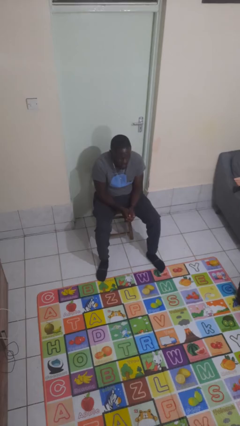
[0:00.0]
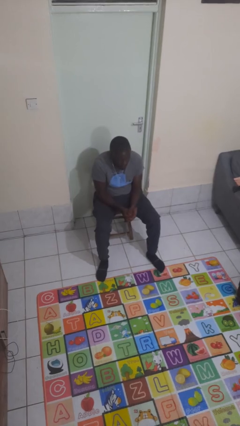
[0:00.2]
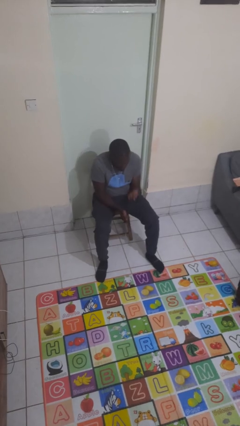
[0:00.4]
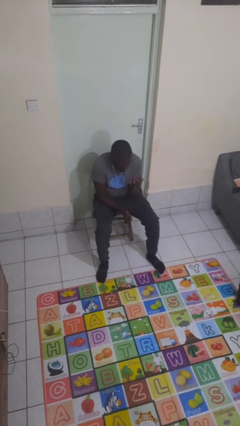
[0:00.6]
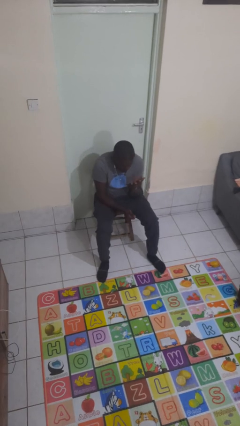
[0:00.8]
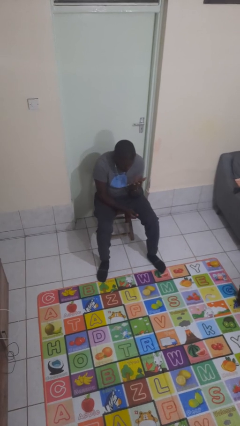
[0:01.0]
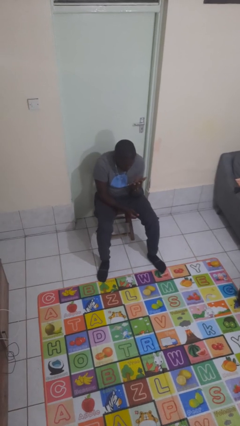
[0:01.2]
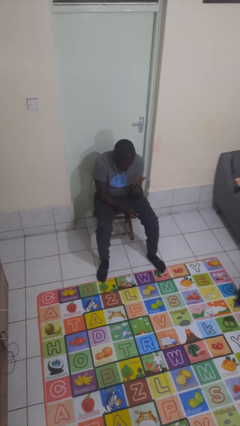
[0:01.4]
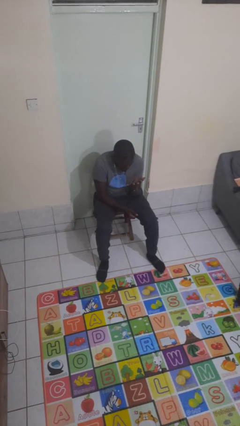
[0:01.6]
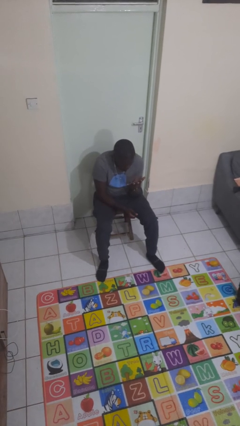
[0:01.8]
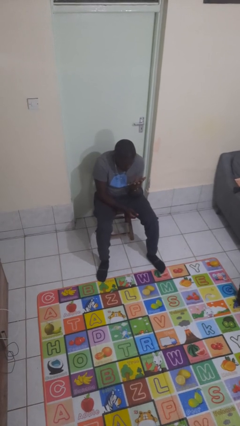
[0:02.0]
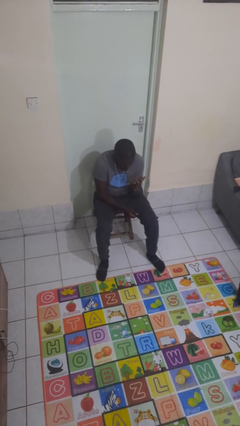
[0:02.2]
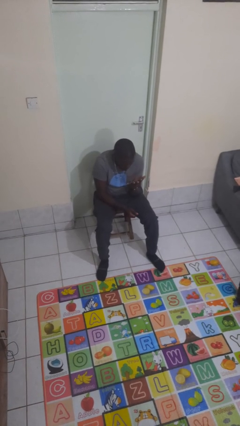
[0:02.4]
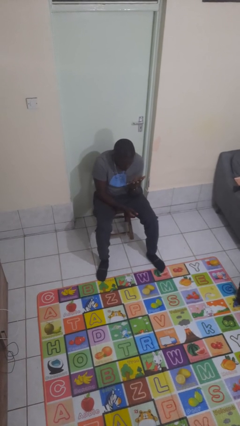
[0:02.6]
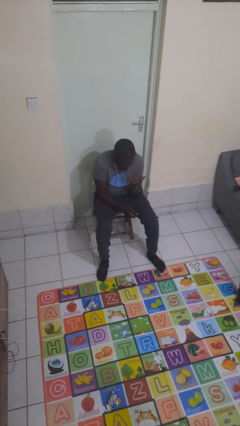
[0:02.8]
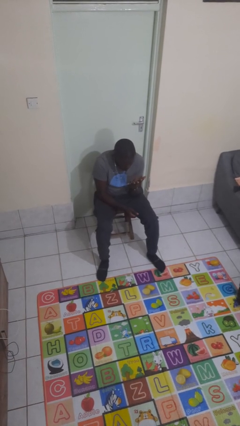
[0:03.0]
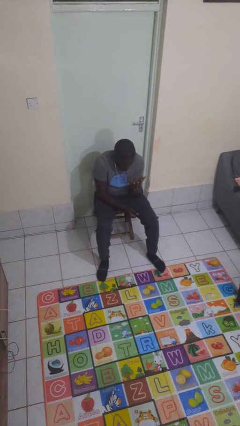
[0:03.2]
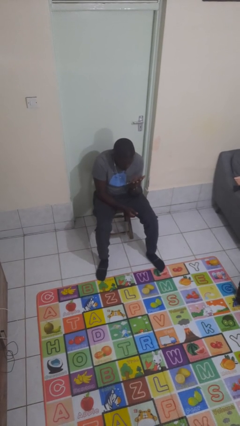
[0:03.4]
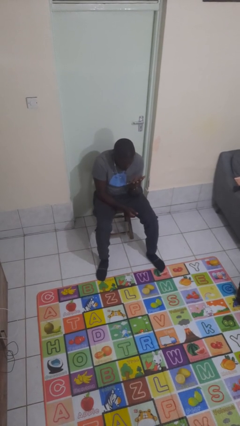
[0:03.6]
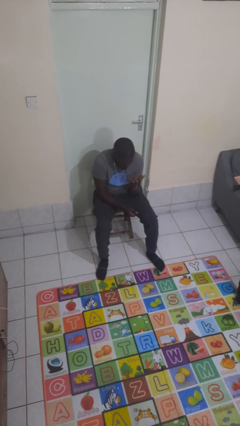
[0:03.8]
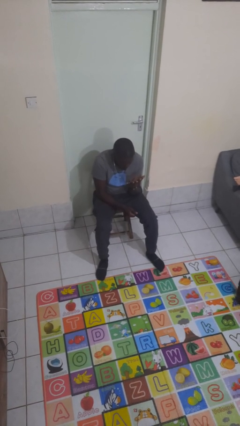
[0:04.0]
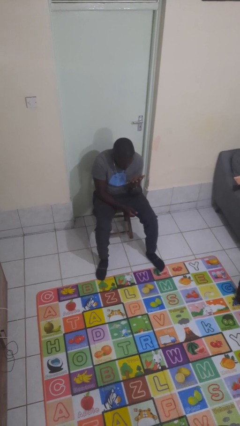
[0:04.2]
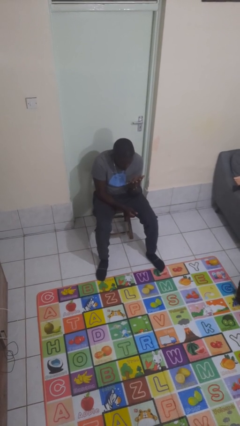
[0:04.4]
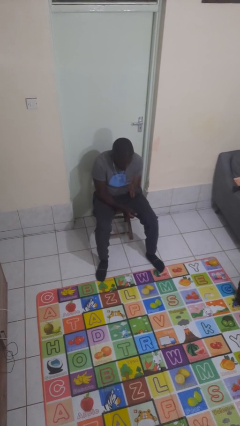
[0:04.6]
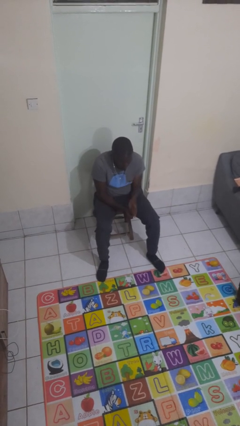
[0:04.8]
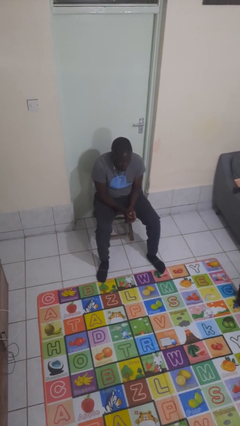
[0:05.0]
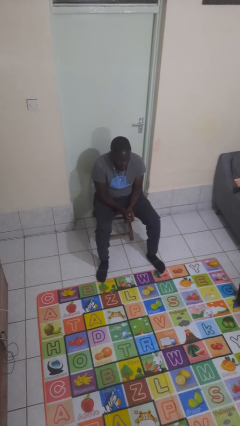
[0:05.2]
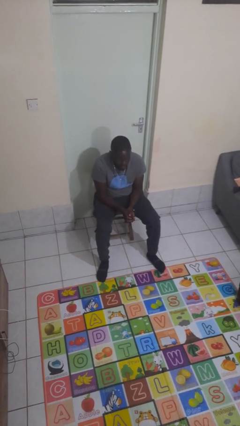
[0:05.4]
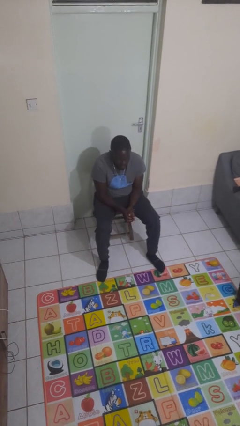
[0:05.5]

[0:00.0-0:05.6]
person looks at hands in lap

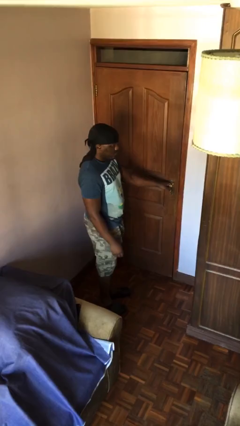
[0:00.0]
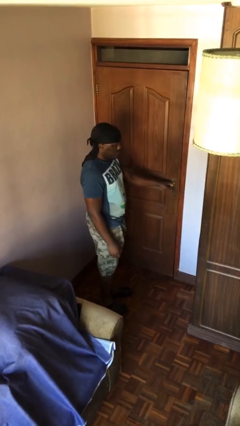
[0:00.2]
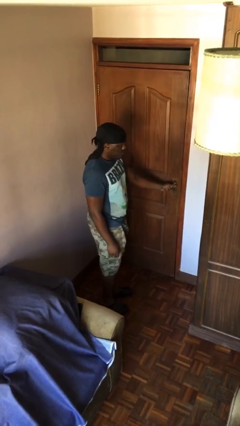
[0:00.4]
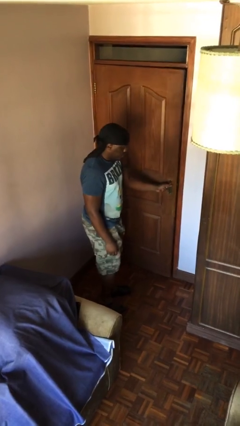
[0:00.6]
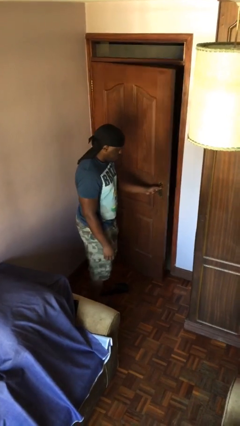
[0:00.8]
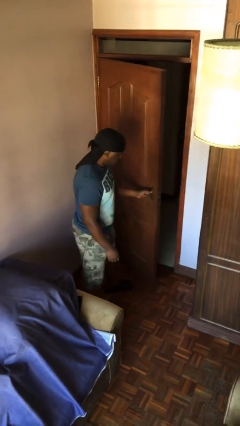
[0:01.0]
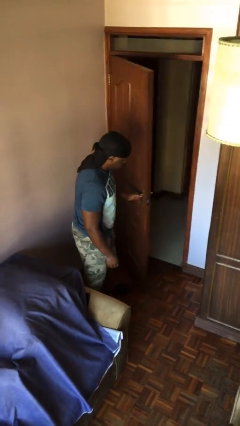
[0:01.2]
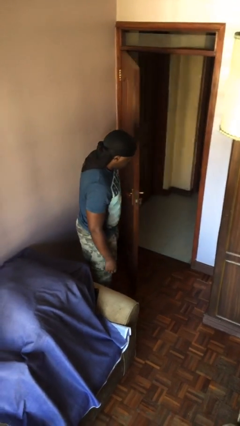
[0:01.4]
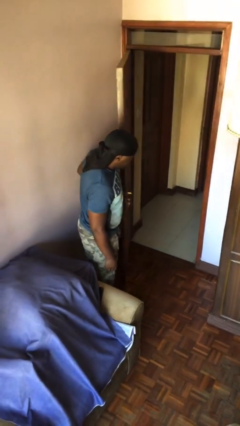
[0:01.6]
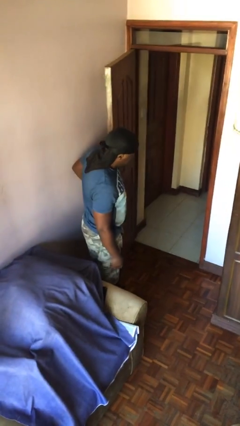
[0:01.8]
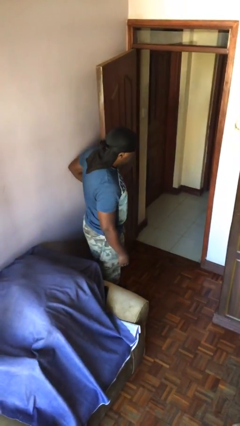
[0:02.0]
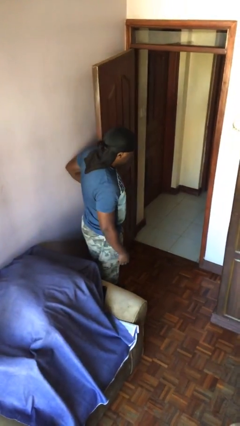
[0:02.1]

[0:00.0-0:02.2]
person opens facility door

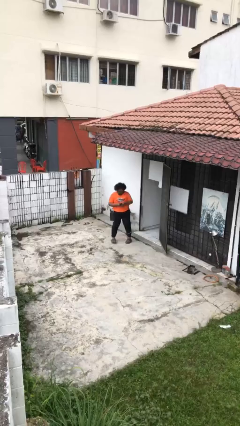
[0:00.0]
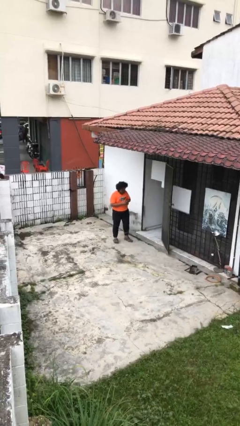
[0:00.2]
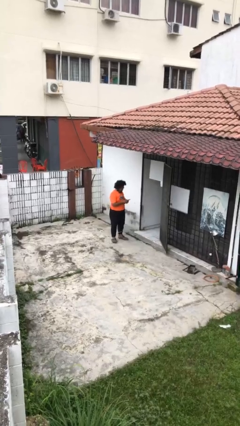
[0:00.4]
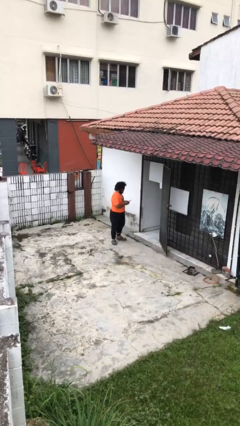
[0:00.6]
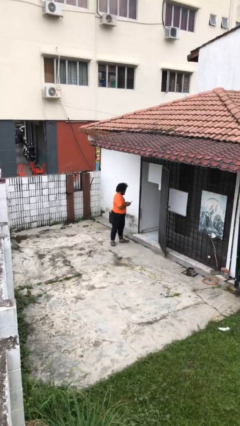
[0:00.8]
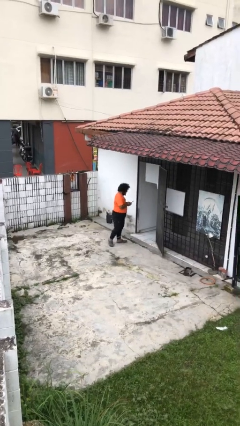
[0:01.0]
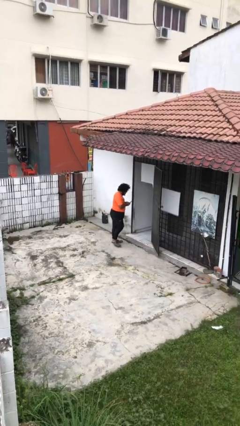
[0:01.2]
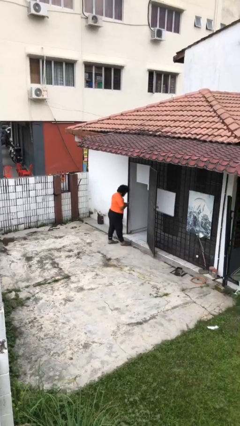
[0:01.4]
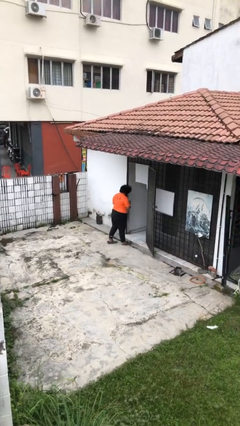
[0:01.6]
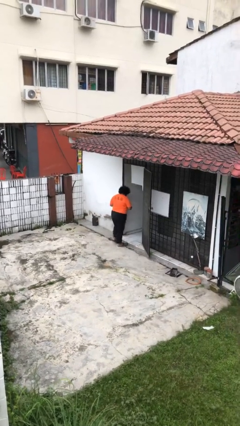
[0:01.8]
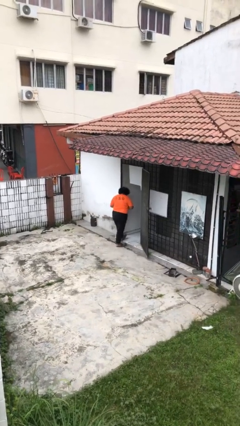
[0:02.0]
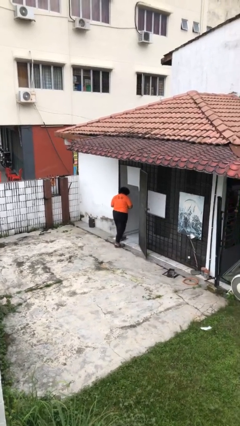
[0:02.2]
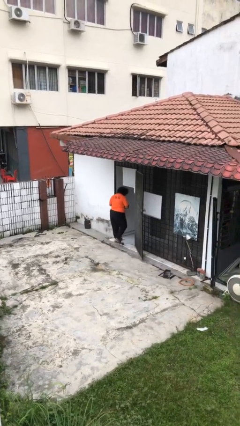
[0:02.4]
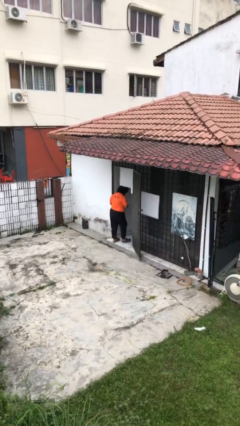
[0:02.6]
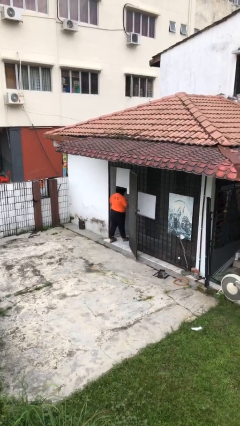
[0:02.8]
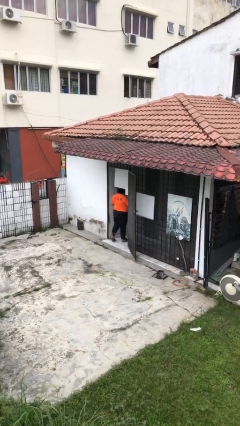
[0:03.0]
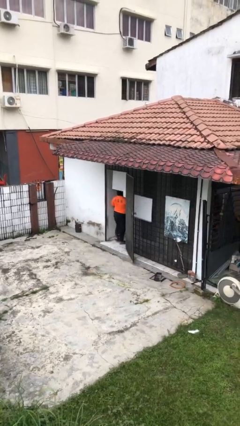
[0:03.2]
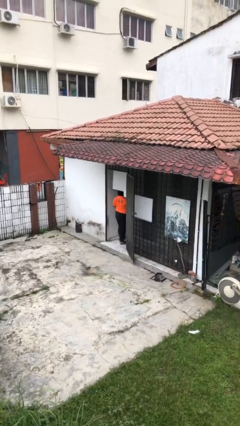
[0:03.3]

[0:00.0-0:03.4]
person exits scene through structure

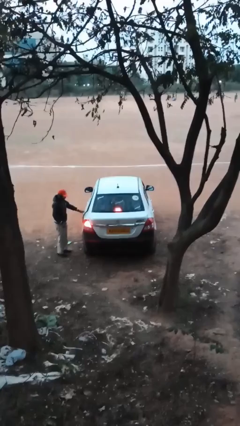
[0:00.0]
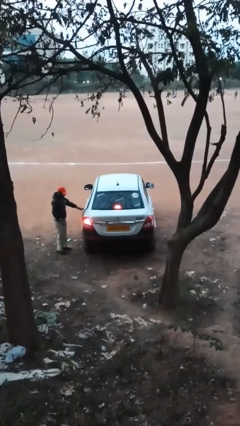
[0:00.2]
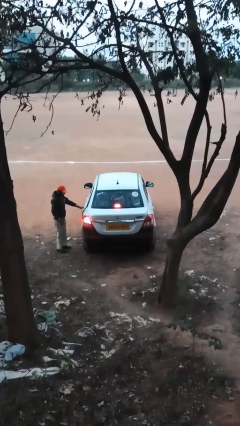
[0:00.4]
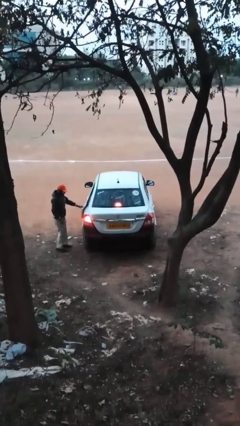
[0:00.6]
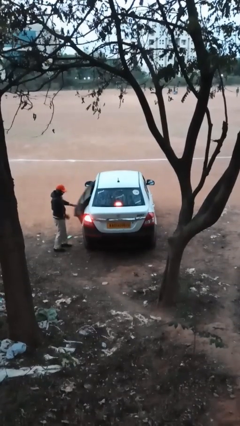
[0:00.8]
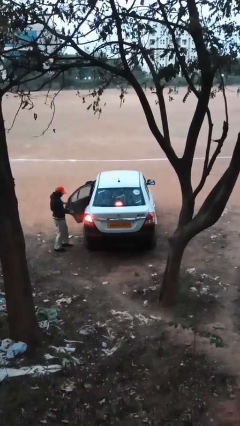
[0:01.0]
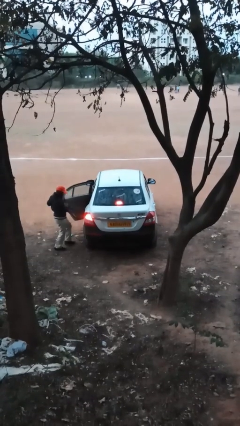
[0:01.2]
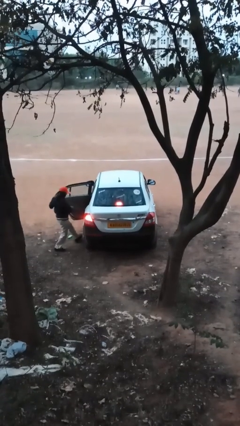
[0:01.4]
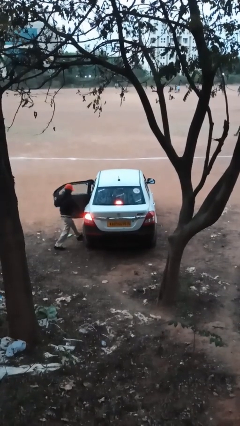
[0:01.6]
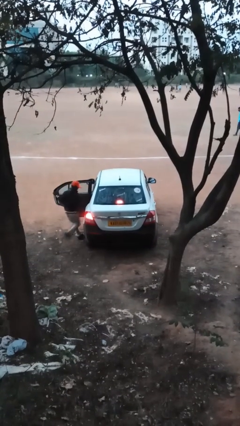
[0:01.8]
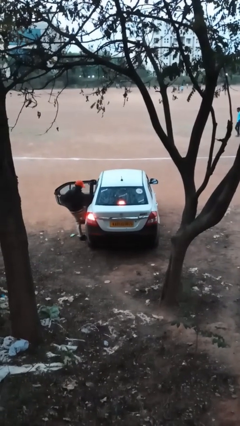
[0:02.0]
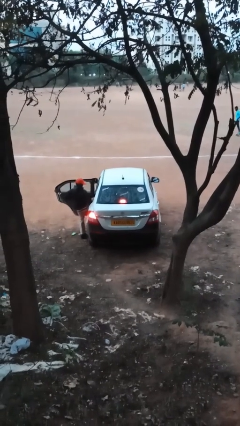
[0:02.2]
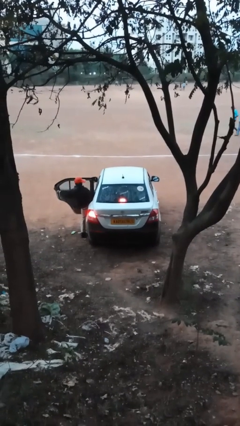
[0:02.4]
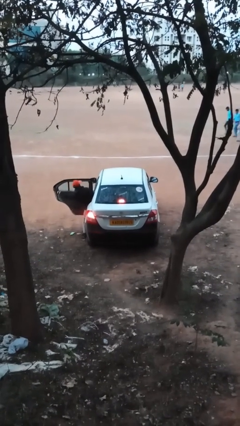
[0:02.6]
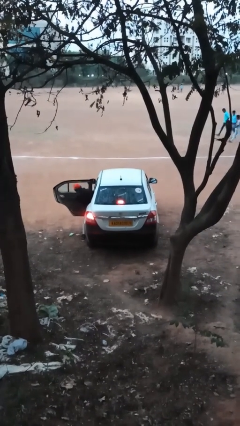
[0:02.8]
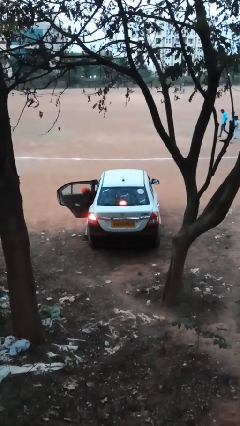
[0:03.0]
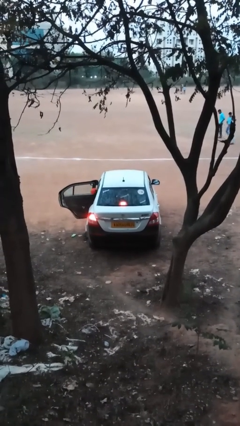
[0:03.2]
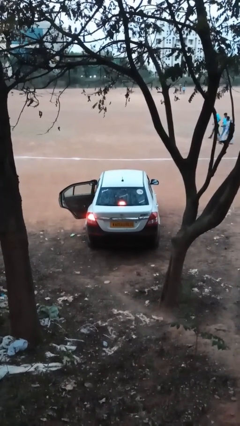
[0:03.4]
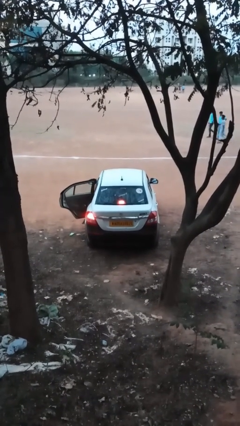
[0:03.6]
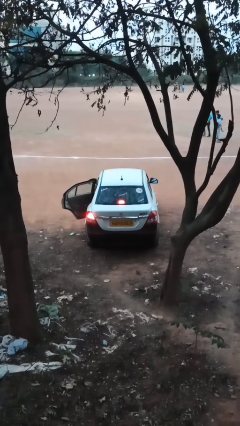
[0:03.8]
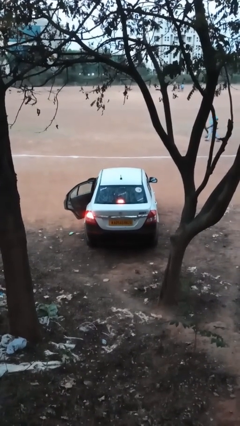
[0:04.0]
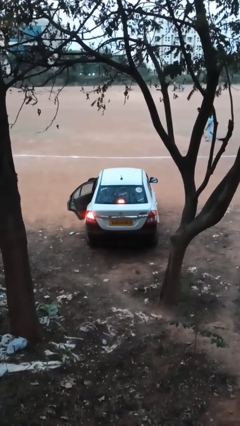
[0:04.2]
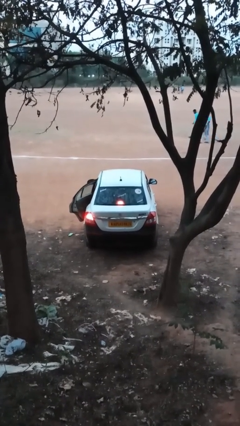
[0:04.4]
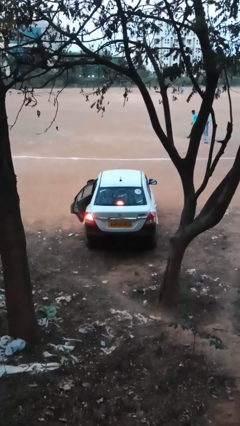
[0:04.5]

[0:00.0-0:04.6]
car picks up person

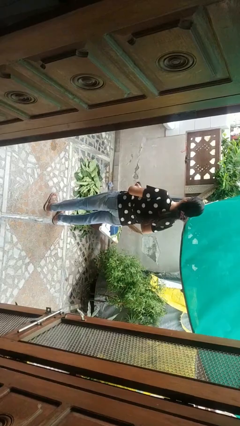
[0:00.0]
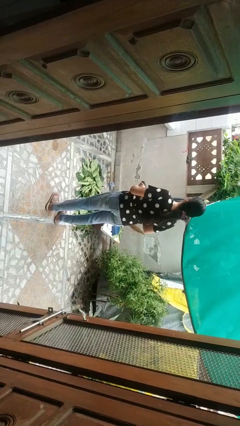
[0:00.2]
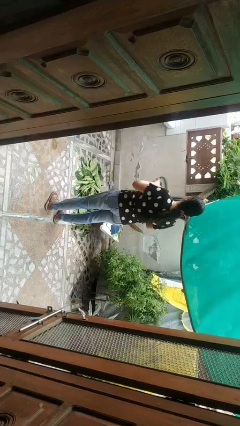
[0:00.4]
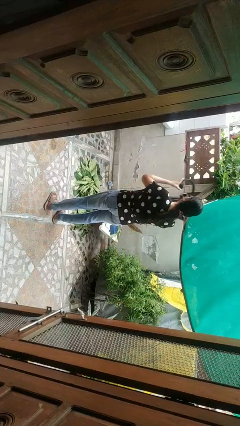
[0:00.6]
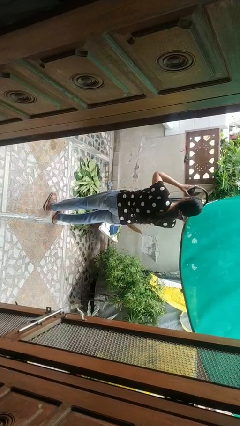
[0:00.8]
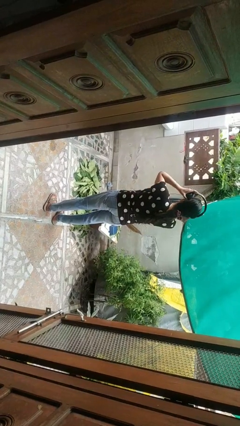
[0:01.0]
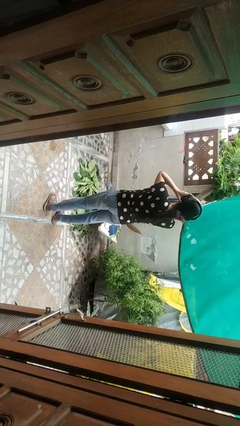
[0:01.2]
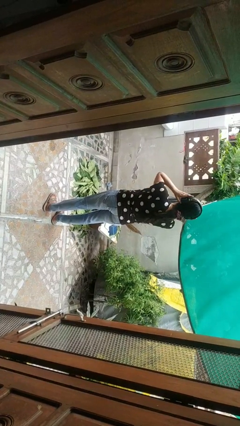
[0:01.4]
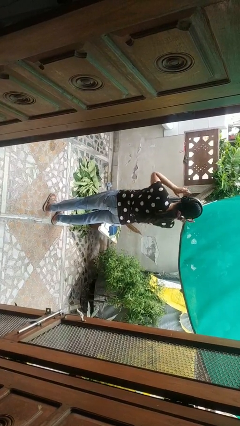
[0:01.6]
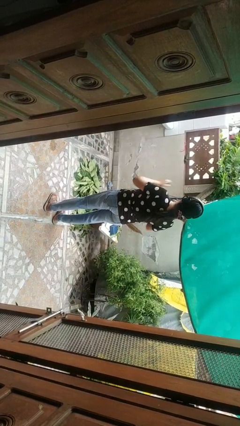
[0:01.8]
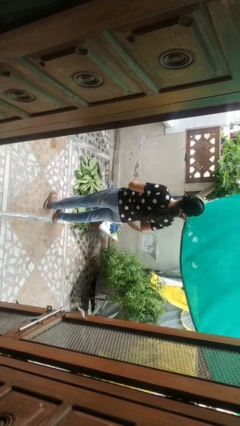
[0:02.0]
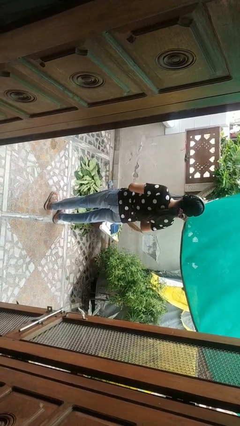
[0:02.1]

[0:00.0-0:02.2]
person puts on headphones
